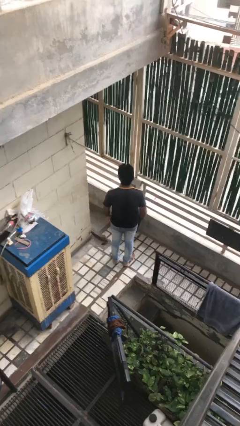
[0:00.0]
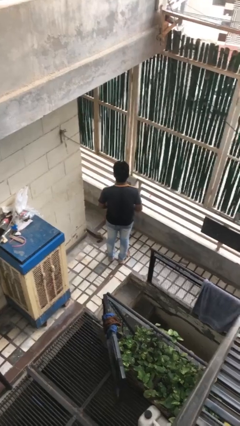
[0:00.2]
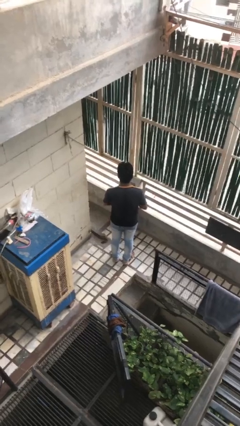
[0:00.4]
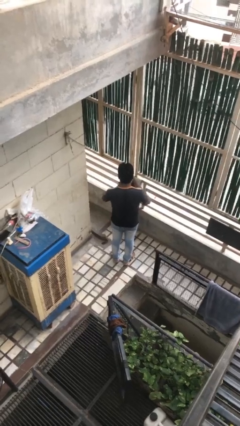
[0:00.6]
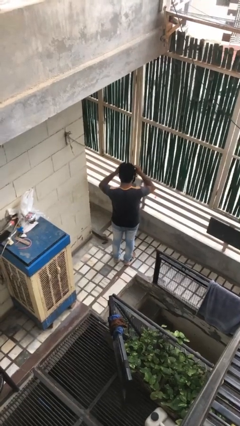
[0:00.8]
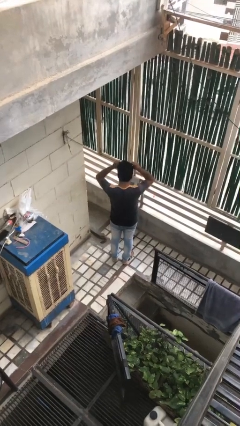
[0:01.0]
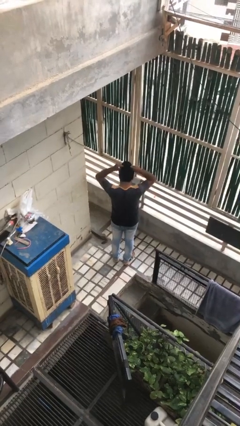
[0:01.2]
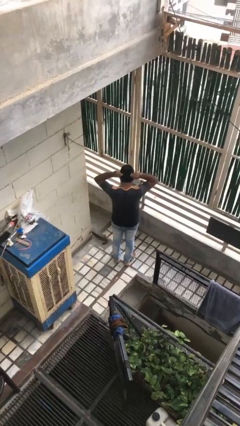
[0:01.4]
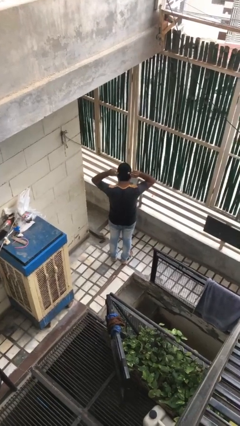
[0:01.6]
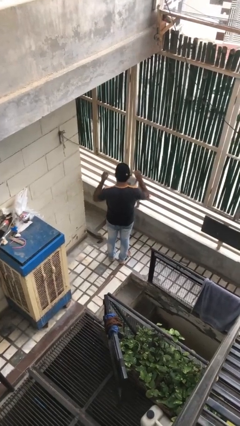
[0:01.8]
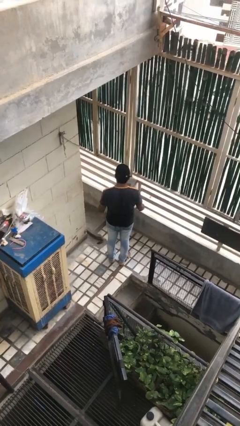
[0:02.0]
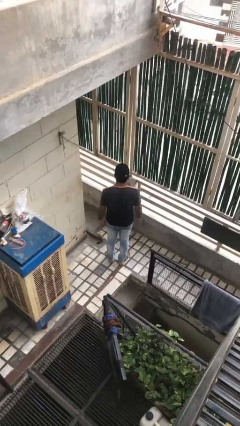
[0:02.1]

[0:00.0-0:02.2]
person puts on hat

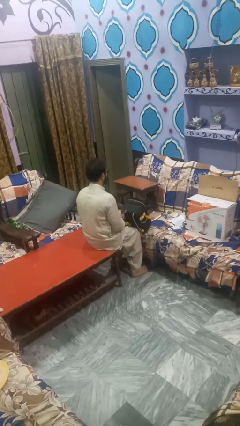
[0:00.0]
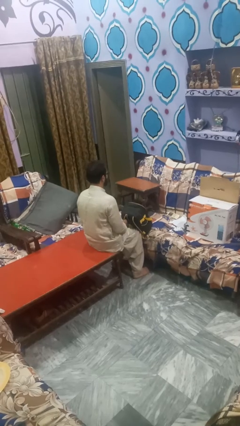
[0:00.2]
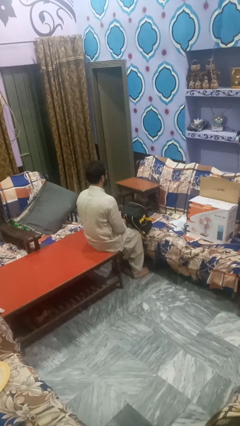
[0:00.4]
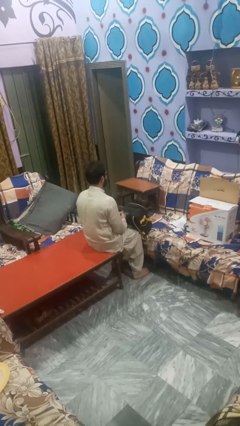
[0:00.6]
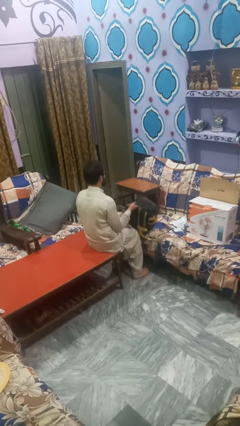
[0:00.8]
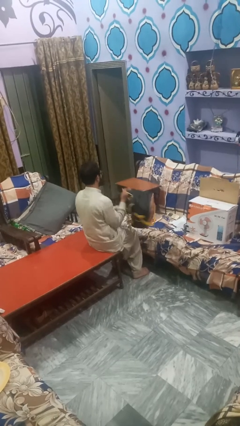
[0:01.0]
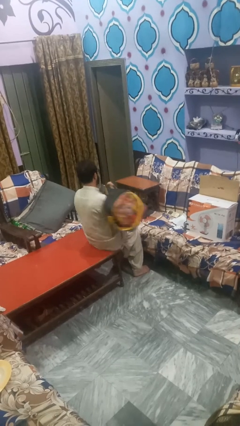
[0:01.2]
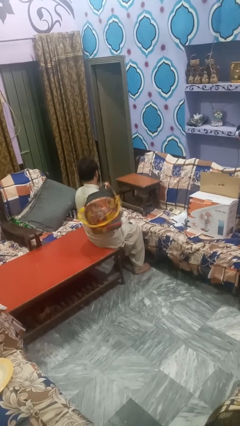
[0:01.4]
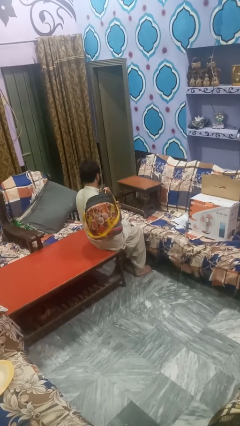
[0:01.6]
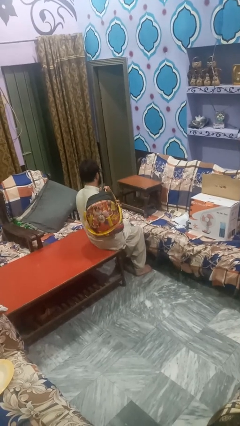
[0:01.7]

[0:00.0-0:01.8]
person puts on backpack

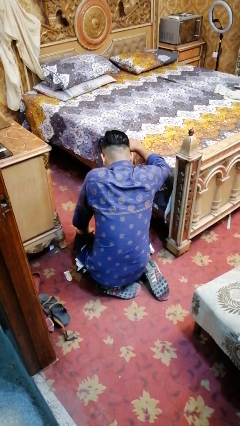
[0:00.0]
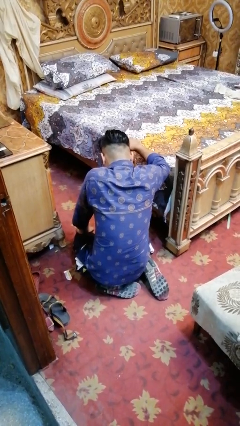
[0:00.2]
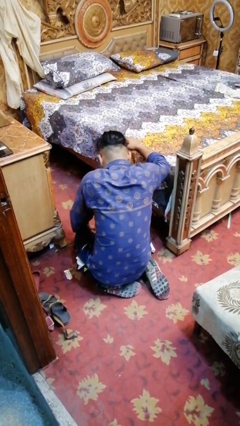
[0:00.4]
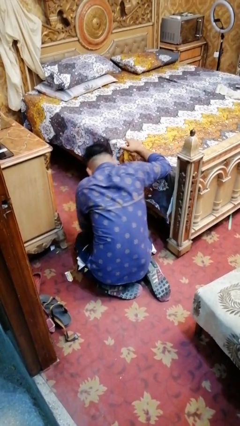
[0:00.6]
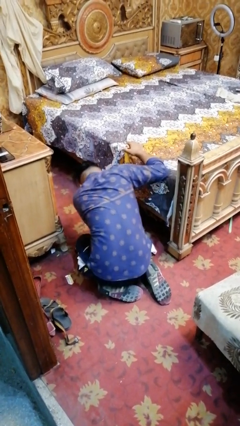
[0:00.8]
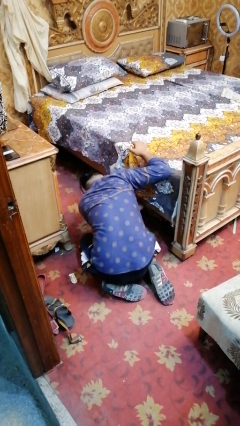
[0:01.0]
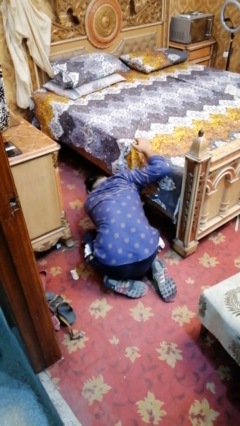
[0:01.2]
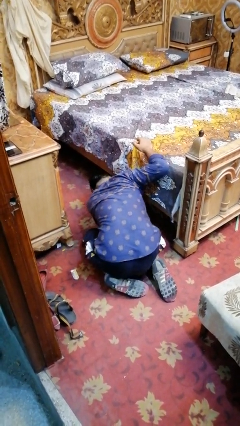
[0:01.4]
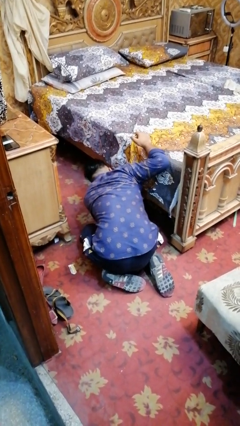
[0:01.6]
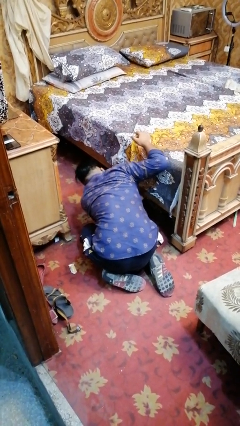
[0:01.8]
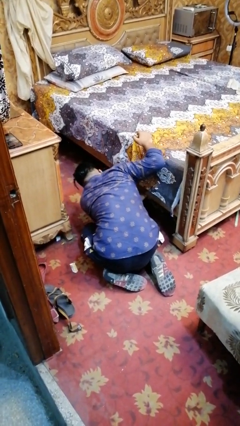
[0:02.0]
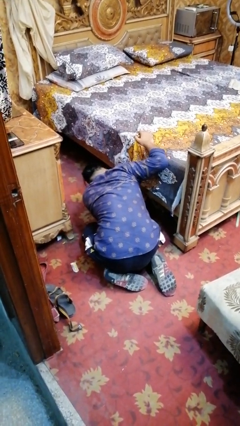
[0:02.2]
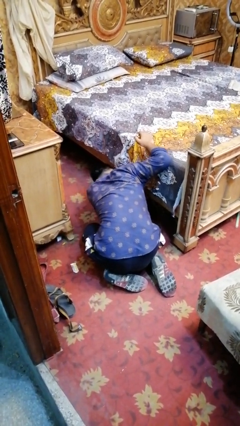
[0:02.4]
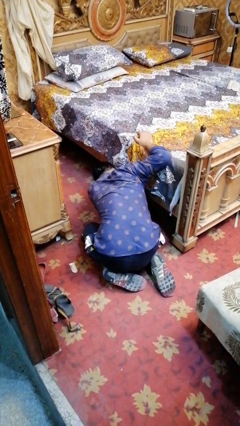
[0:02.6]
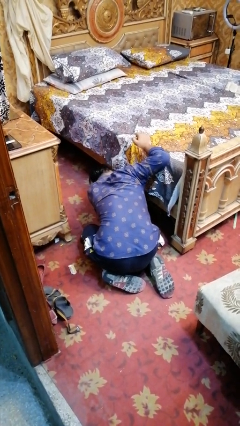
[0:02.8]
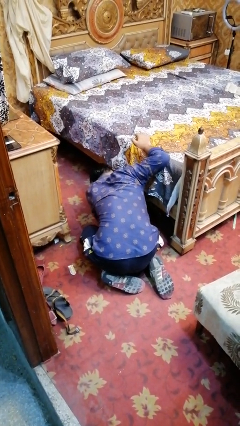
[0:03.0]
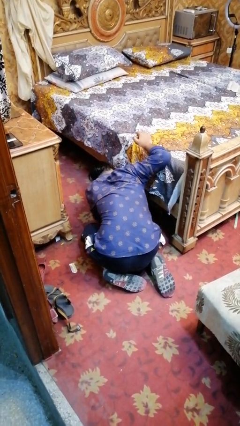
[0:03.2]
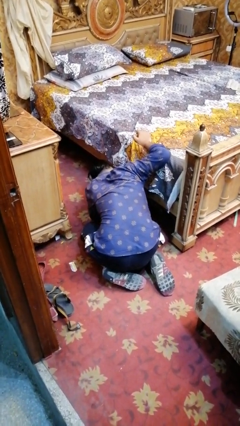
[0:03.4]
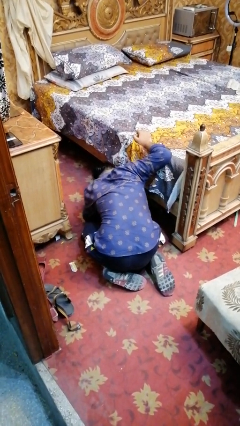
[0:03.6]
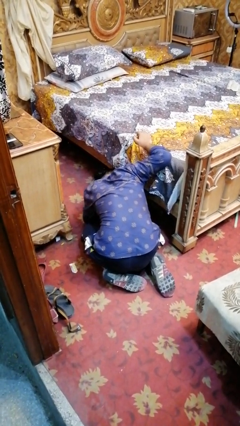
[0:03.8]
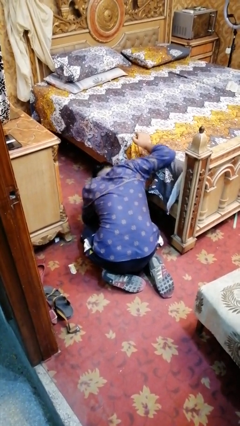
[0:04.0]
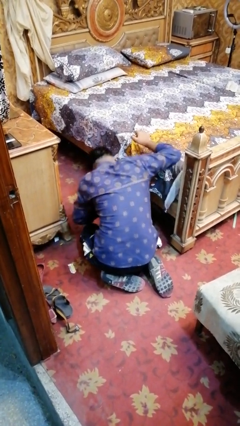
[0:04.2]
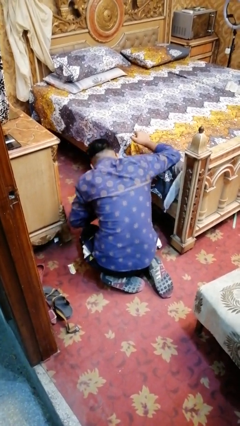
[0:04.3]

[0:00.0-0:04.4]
person searches under bed

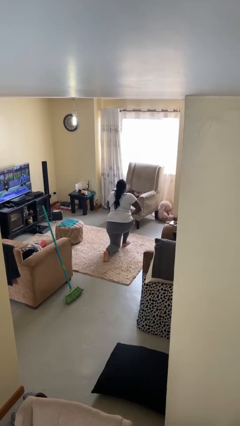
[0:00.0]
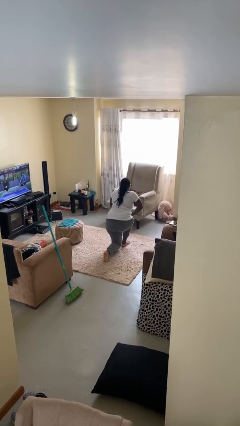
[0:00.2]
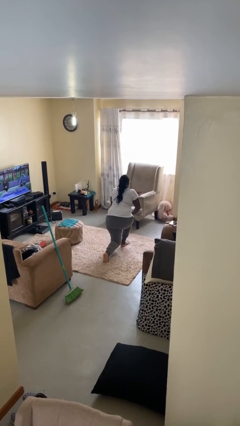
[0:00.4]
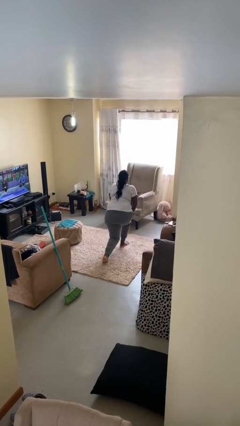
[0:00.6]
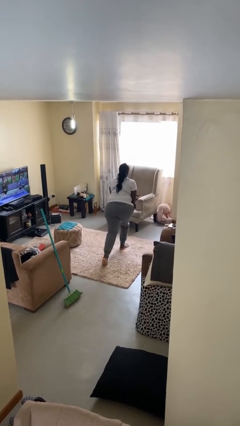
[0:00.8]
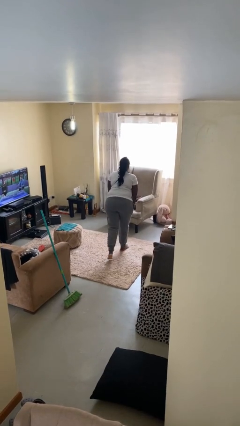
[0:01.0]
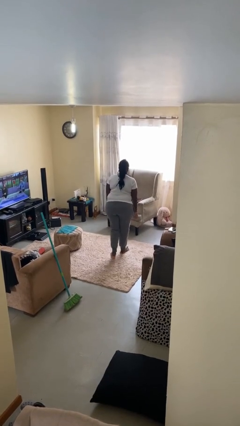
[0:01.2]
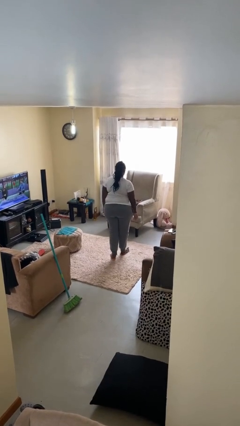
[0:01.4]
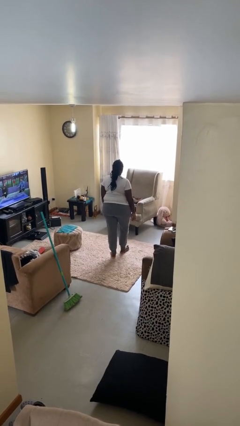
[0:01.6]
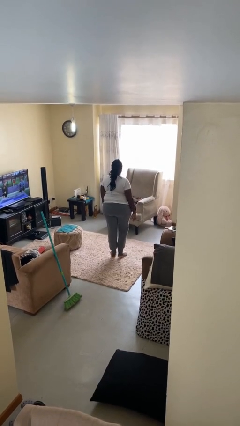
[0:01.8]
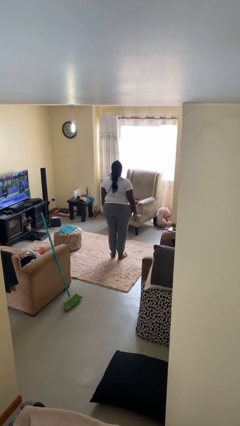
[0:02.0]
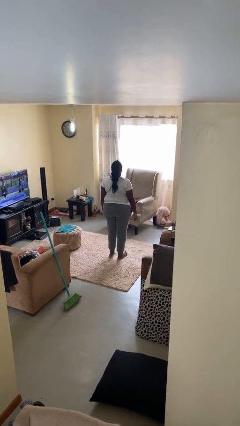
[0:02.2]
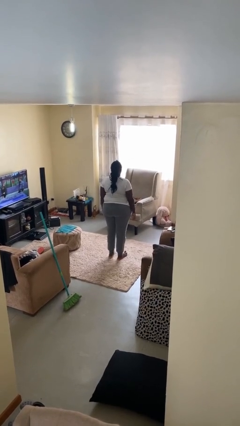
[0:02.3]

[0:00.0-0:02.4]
person stands up from floor

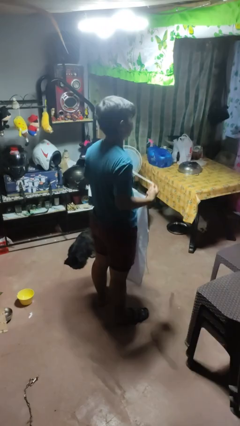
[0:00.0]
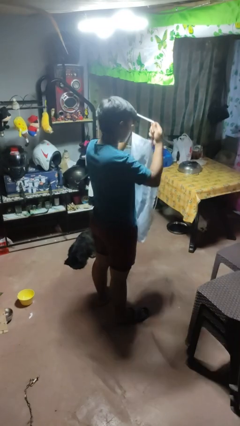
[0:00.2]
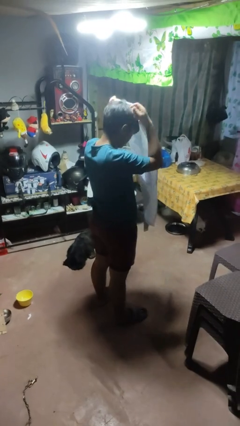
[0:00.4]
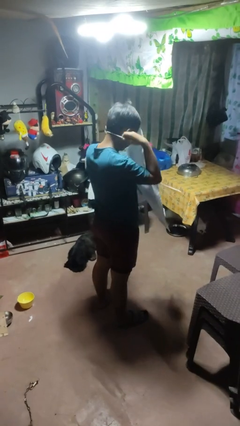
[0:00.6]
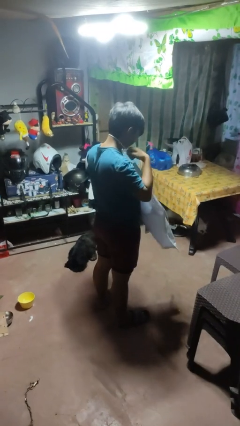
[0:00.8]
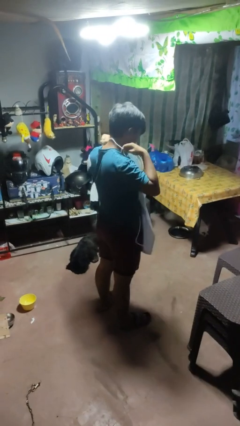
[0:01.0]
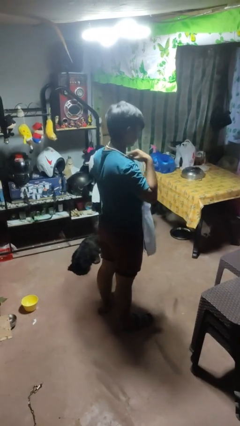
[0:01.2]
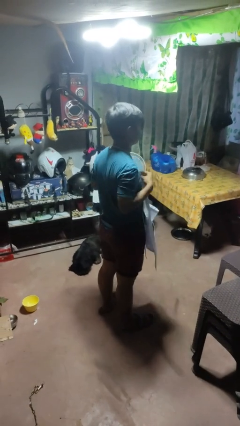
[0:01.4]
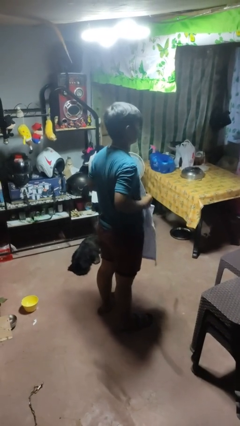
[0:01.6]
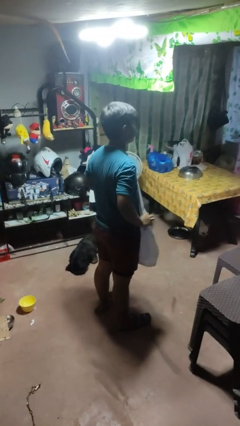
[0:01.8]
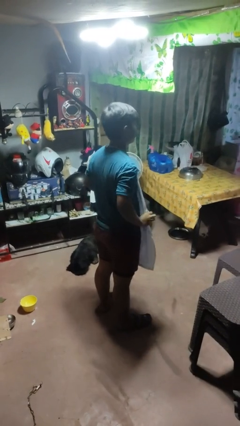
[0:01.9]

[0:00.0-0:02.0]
person puts on apron

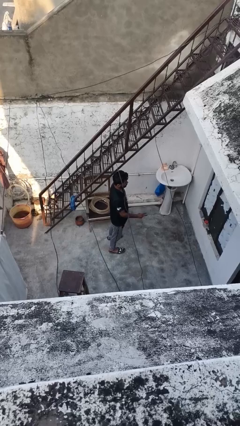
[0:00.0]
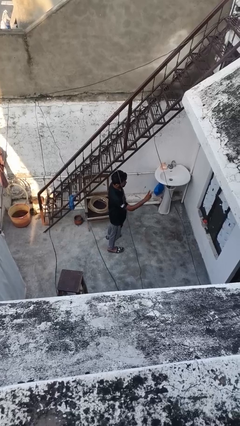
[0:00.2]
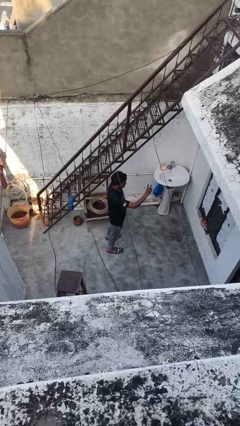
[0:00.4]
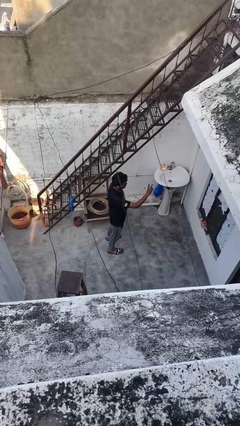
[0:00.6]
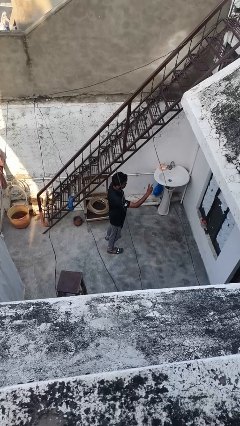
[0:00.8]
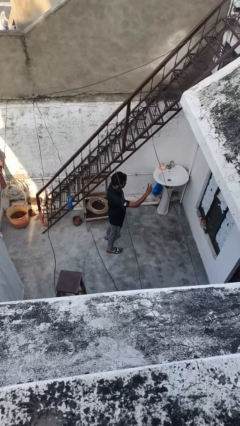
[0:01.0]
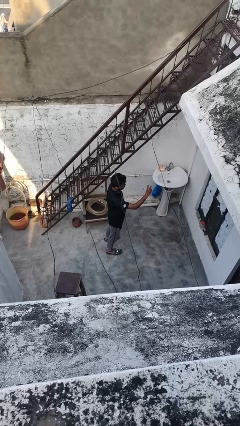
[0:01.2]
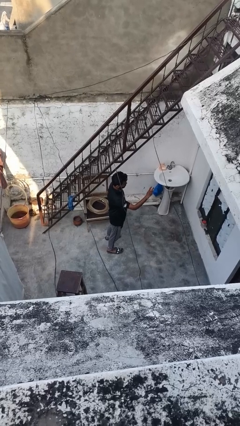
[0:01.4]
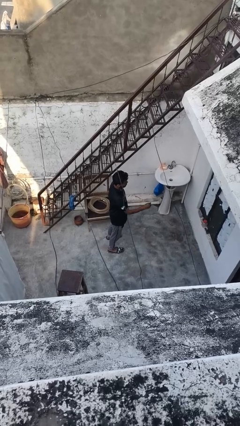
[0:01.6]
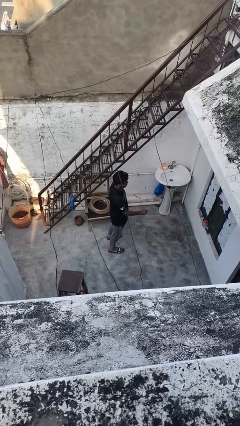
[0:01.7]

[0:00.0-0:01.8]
person gestures peace

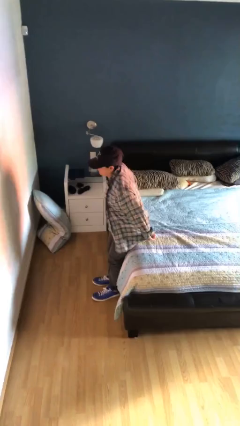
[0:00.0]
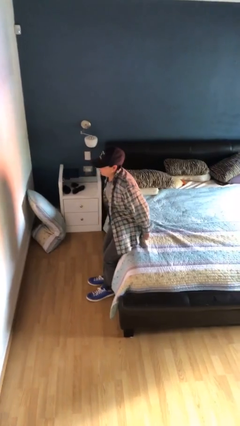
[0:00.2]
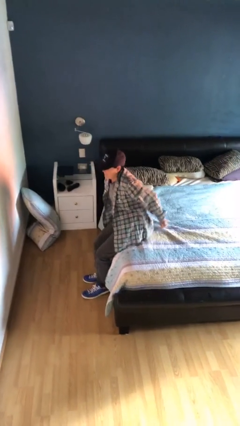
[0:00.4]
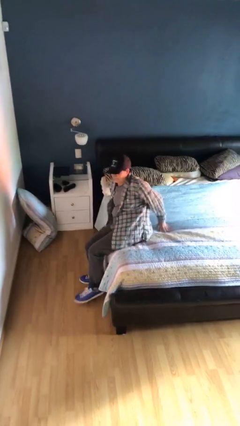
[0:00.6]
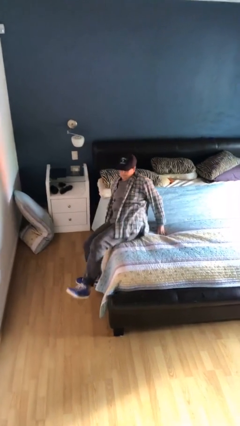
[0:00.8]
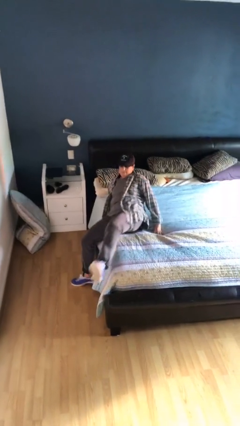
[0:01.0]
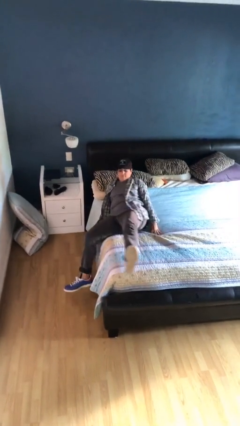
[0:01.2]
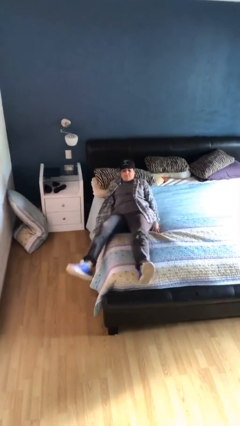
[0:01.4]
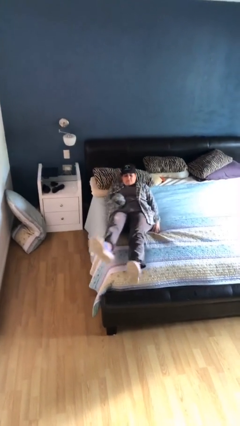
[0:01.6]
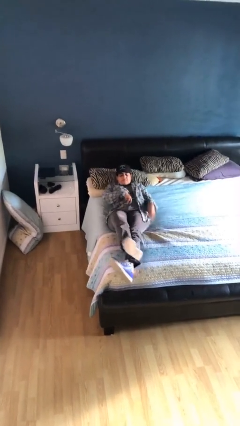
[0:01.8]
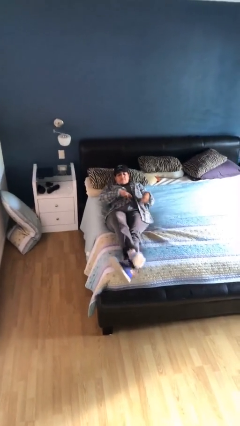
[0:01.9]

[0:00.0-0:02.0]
person lies down on bed

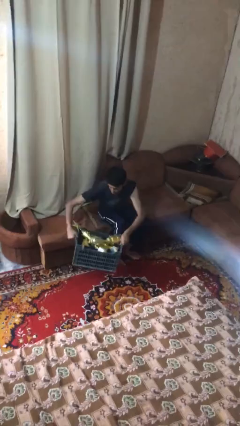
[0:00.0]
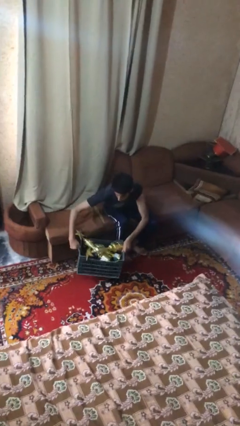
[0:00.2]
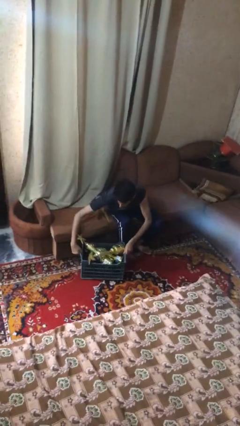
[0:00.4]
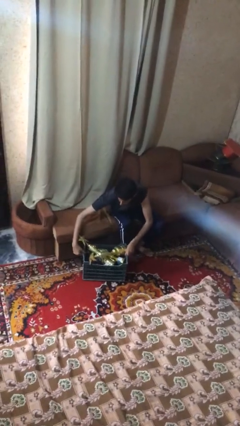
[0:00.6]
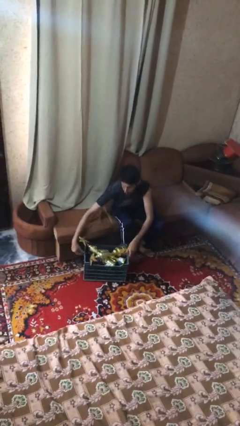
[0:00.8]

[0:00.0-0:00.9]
person puts down object on floor
